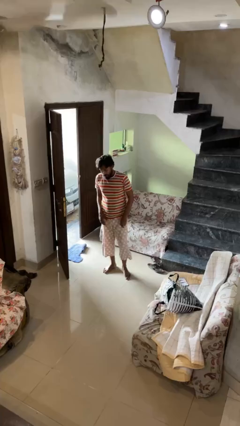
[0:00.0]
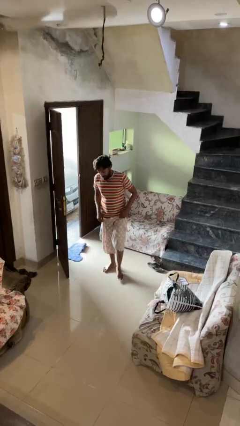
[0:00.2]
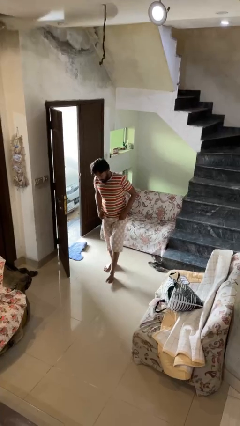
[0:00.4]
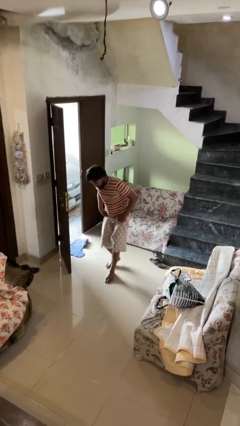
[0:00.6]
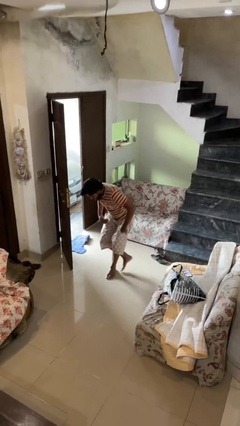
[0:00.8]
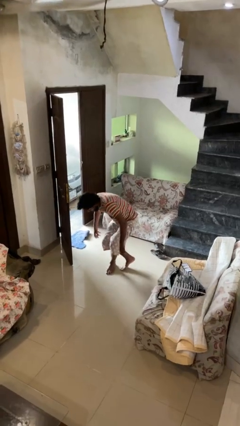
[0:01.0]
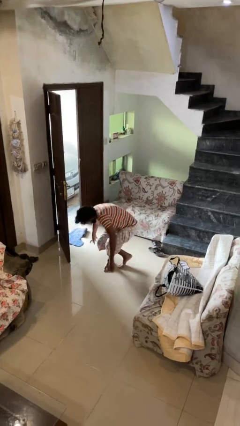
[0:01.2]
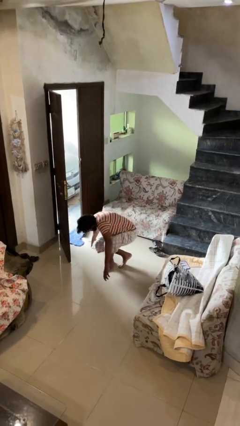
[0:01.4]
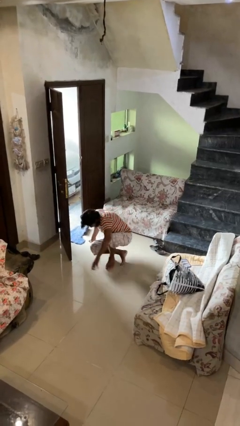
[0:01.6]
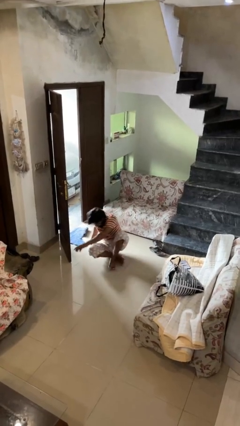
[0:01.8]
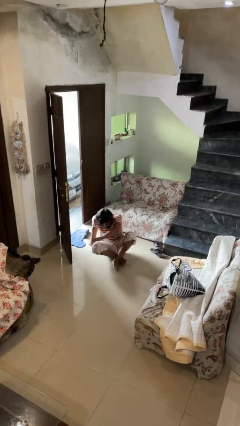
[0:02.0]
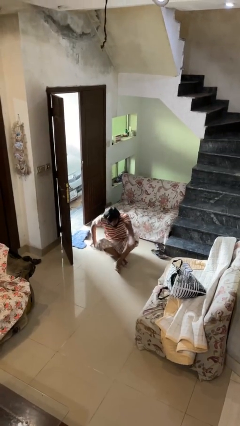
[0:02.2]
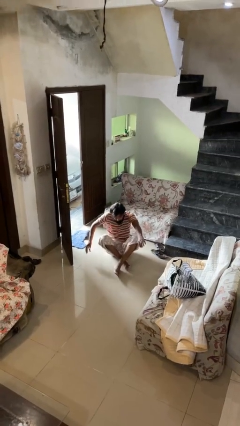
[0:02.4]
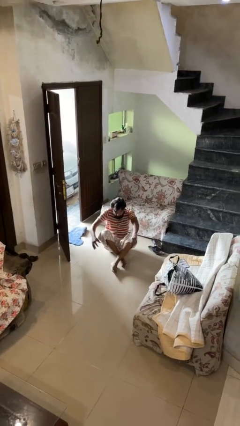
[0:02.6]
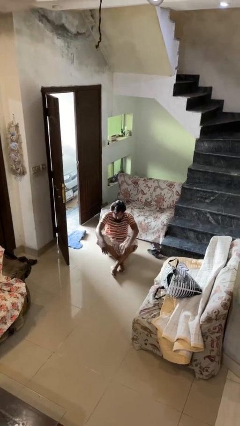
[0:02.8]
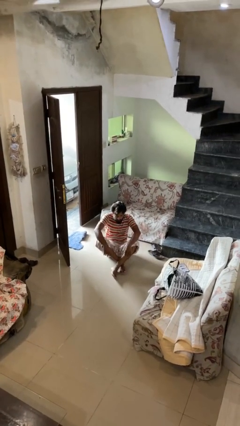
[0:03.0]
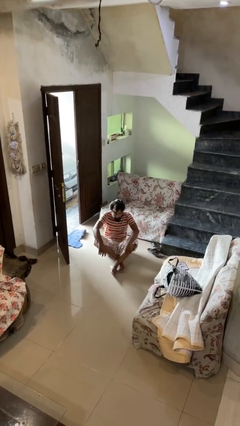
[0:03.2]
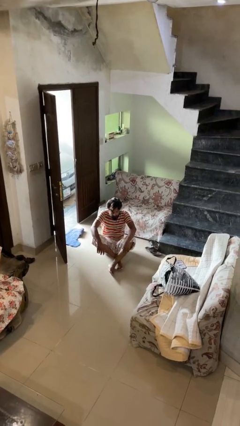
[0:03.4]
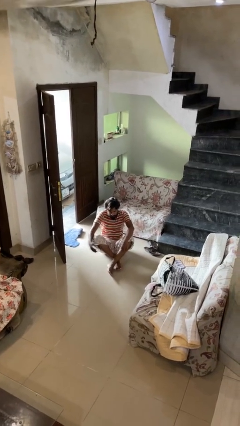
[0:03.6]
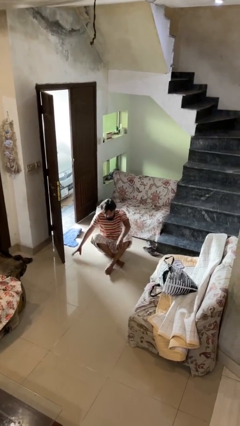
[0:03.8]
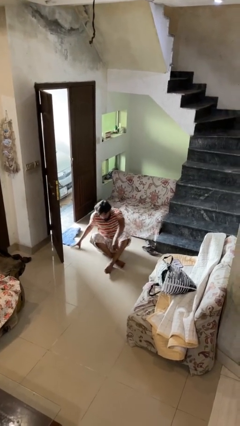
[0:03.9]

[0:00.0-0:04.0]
person sits crisscross

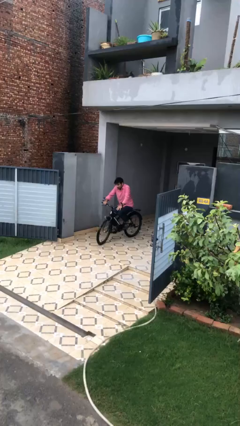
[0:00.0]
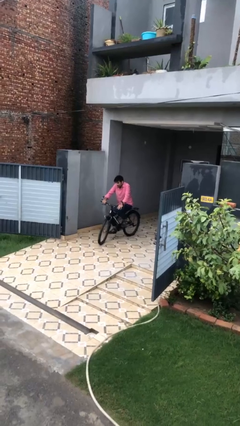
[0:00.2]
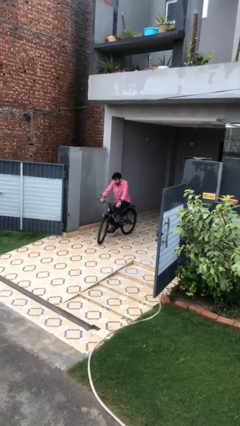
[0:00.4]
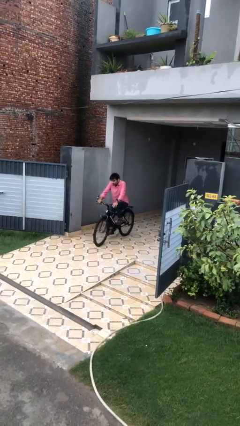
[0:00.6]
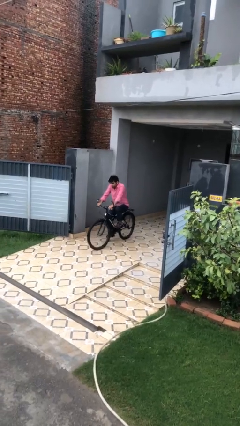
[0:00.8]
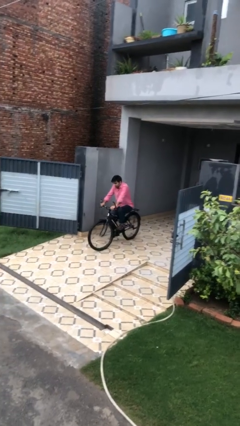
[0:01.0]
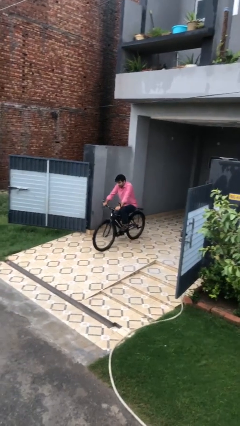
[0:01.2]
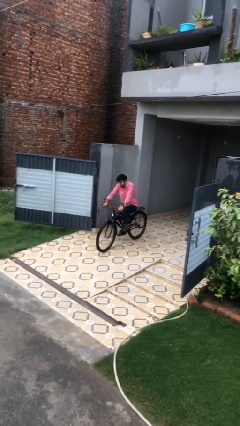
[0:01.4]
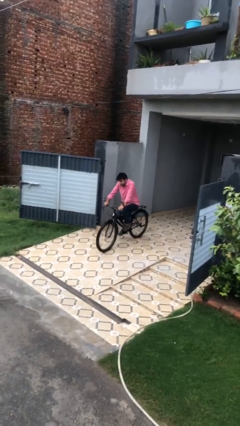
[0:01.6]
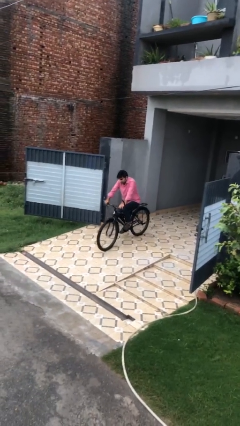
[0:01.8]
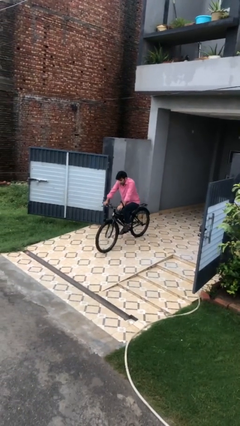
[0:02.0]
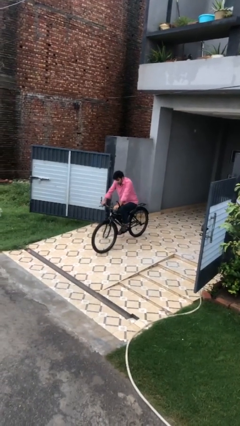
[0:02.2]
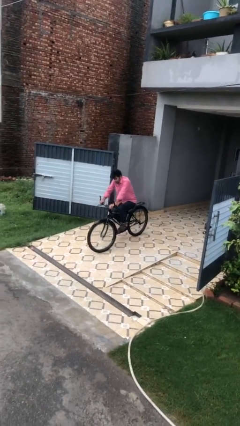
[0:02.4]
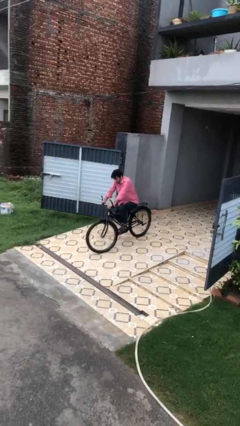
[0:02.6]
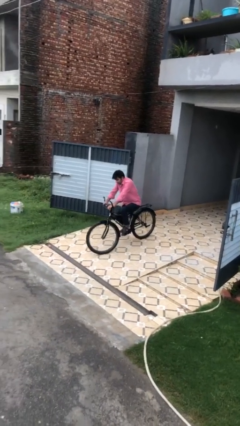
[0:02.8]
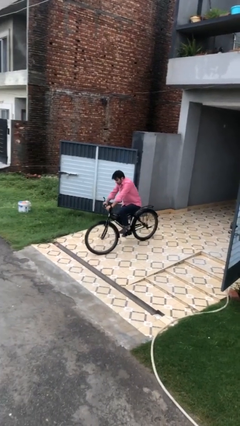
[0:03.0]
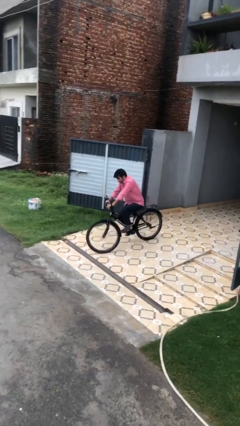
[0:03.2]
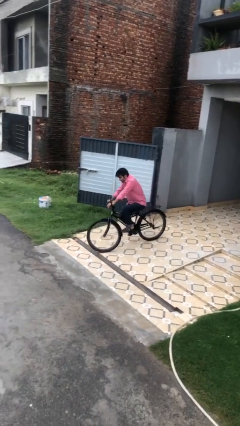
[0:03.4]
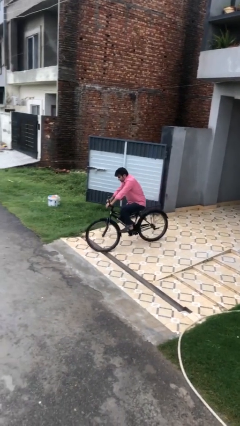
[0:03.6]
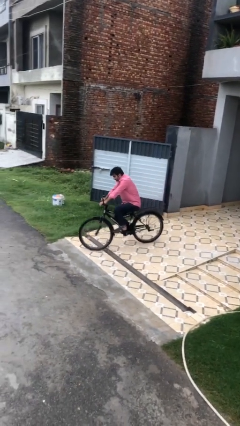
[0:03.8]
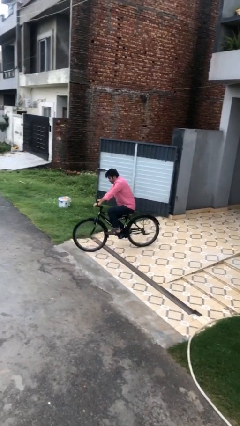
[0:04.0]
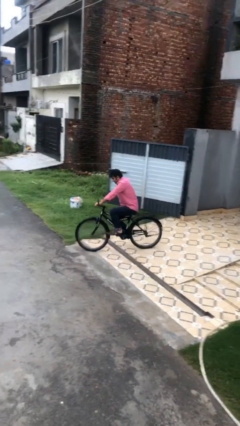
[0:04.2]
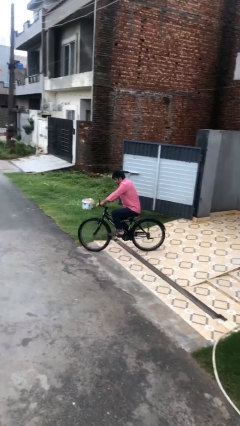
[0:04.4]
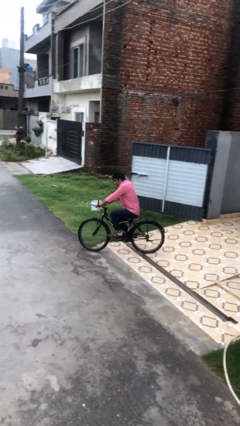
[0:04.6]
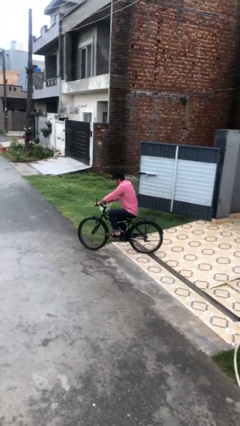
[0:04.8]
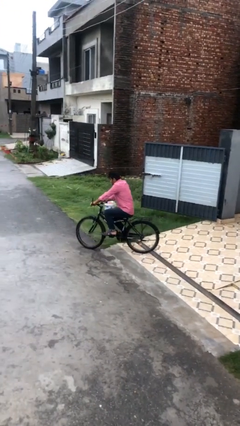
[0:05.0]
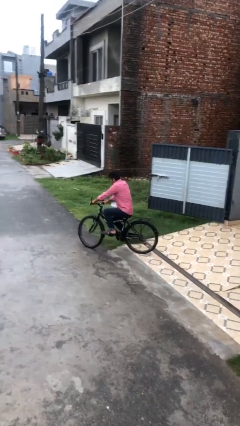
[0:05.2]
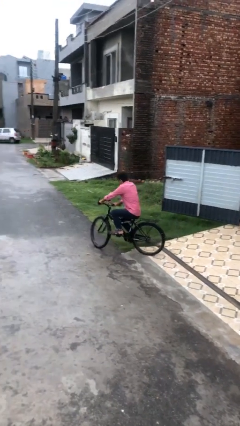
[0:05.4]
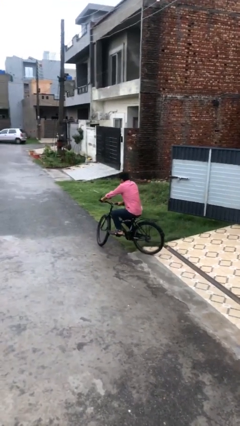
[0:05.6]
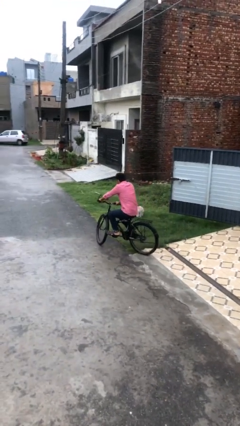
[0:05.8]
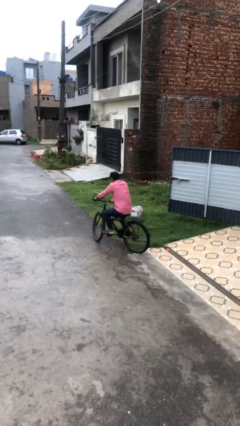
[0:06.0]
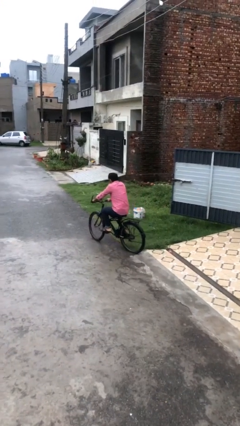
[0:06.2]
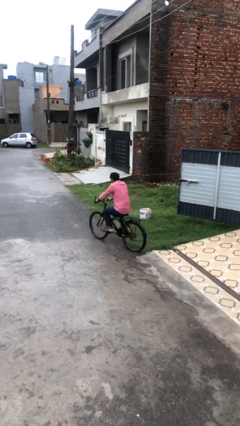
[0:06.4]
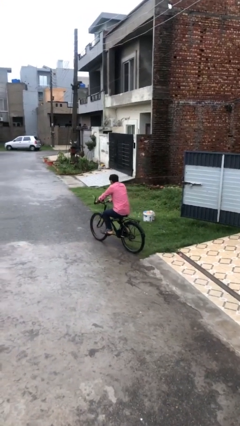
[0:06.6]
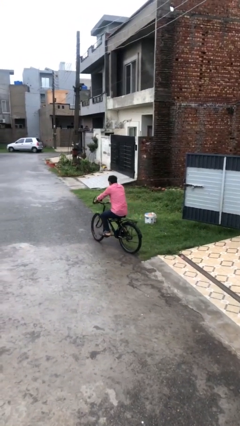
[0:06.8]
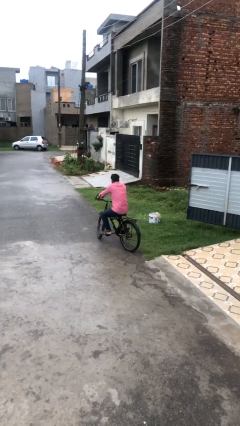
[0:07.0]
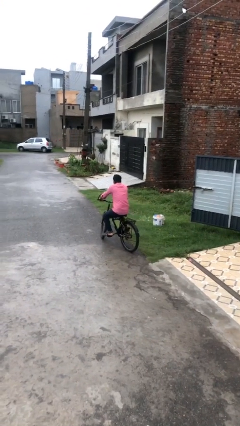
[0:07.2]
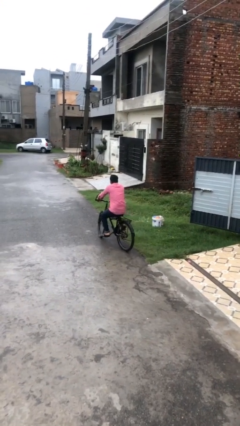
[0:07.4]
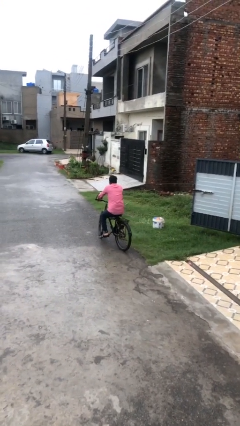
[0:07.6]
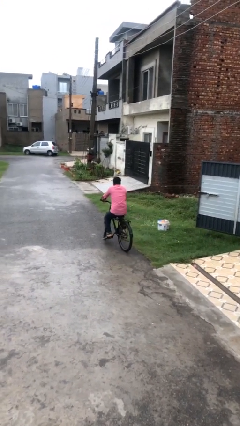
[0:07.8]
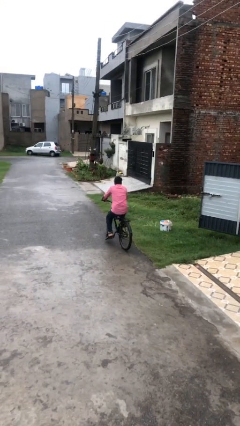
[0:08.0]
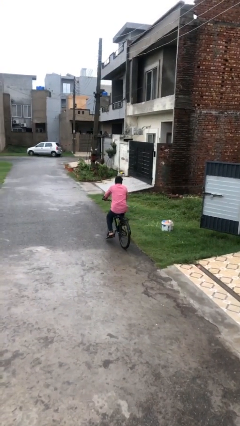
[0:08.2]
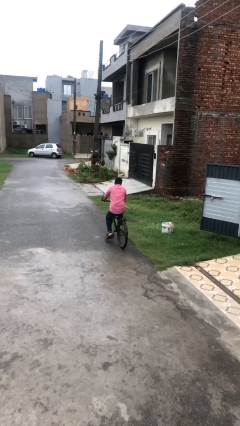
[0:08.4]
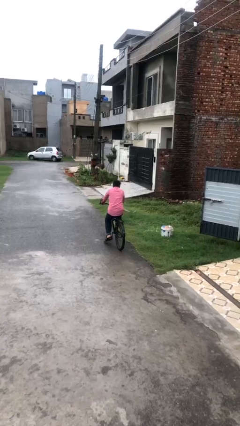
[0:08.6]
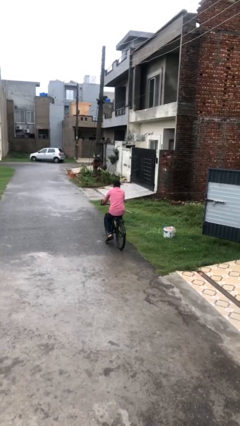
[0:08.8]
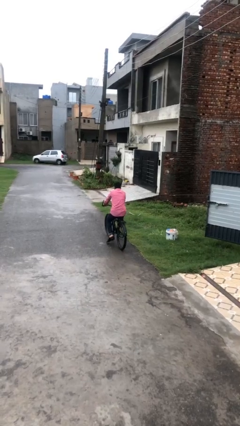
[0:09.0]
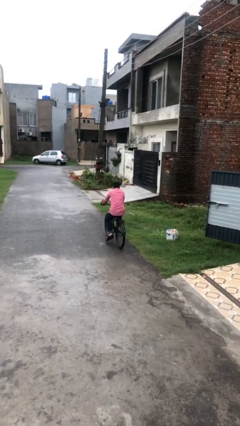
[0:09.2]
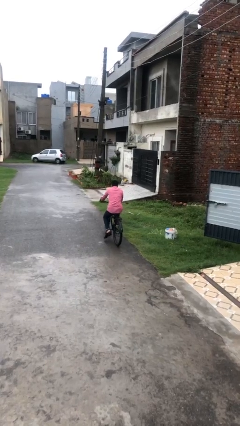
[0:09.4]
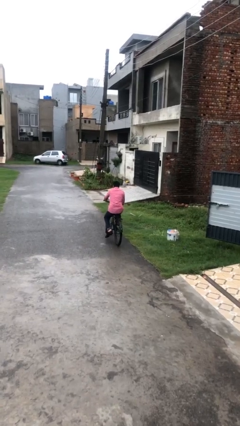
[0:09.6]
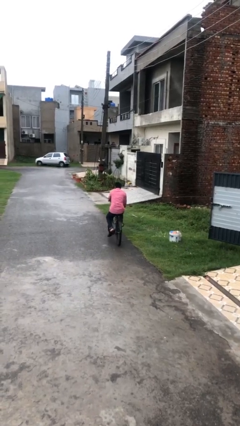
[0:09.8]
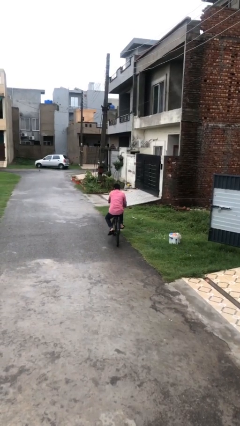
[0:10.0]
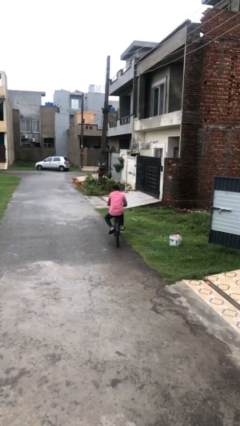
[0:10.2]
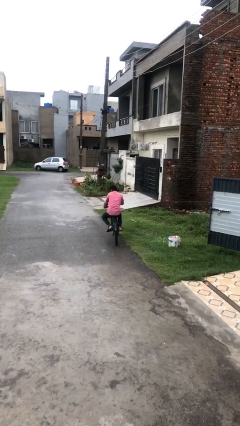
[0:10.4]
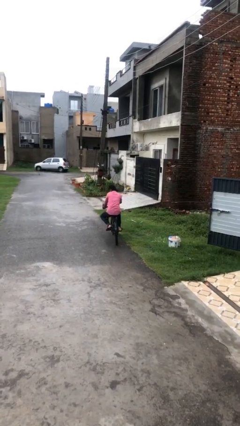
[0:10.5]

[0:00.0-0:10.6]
person rides bicycle

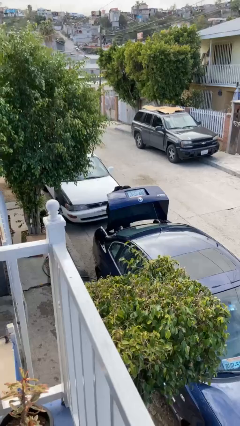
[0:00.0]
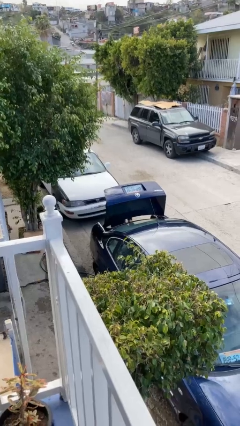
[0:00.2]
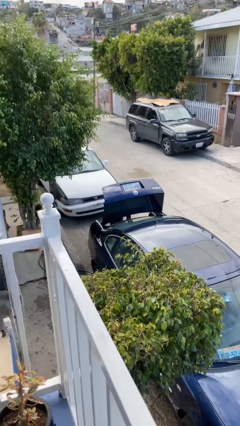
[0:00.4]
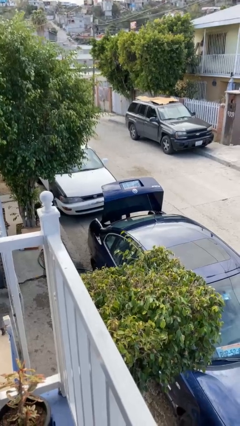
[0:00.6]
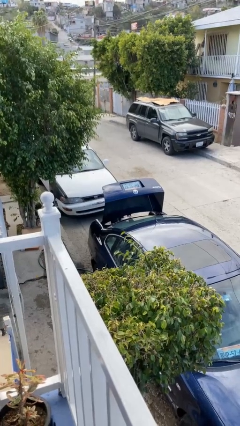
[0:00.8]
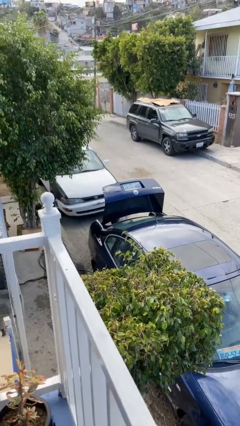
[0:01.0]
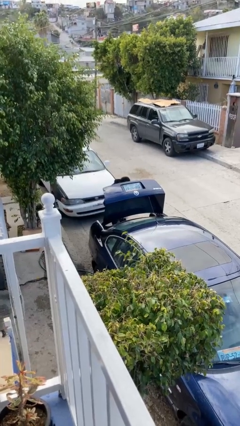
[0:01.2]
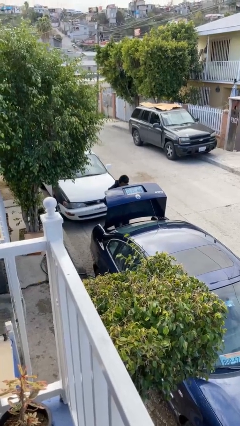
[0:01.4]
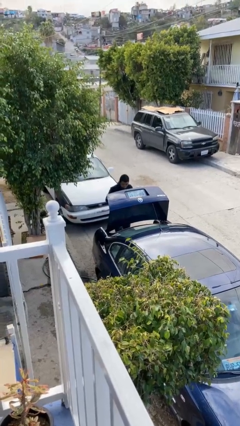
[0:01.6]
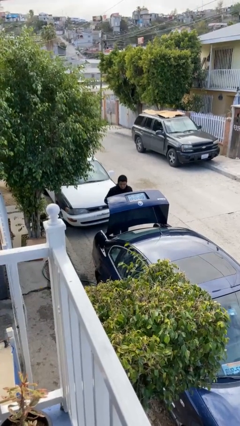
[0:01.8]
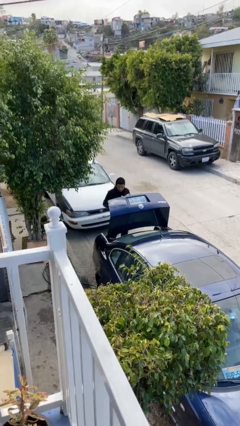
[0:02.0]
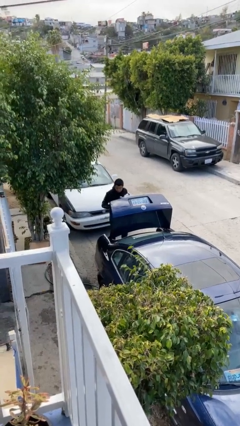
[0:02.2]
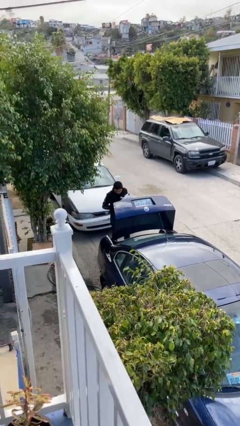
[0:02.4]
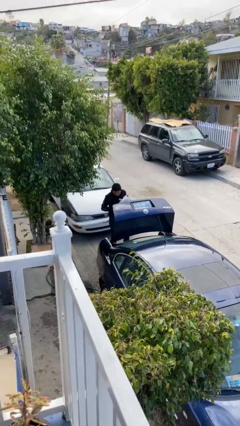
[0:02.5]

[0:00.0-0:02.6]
person unloads car

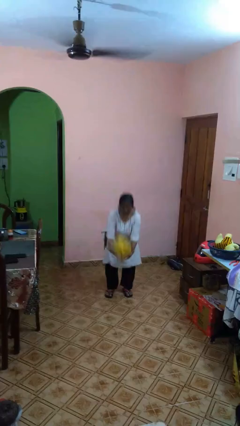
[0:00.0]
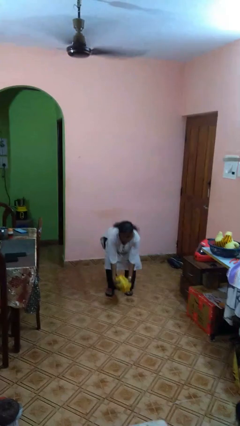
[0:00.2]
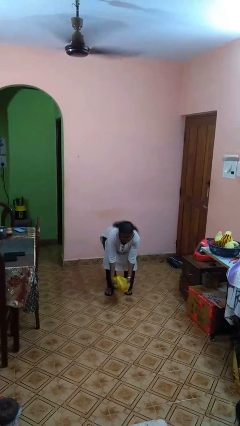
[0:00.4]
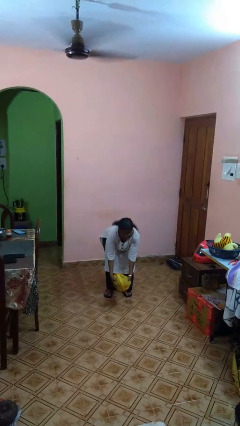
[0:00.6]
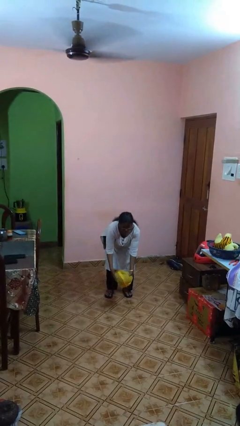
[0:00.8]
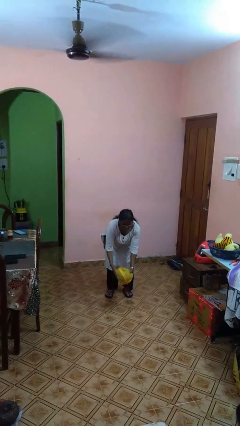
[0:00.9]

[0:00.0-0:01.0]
person catches dropped object
